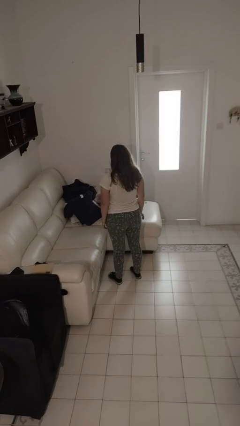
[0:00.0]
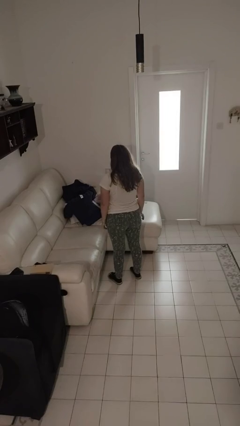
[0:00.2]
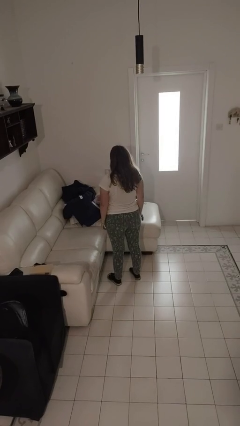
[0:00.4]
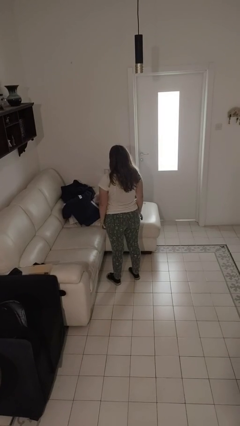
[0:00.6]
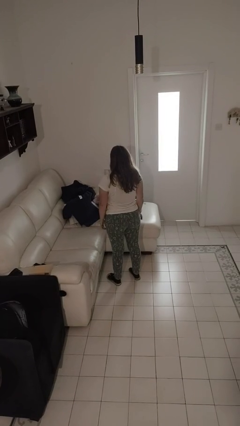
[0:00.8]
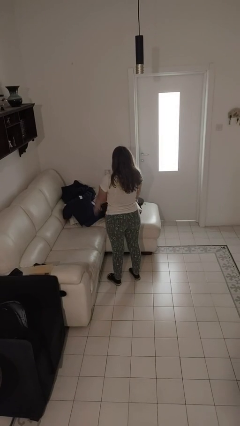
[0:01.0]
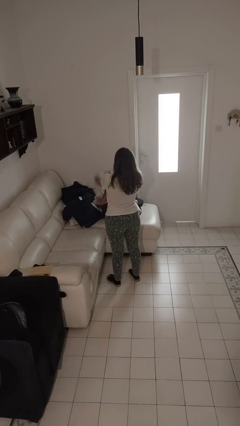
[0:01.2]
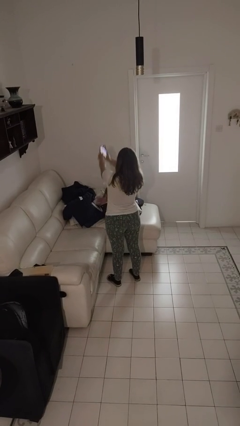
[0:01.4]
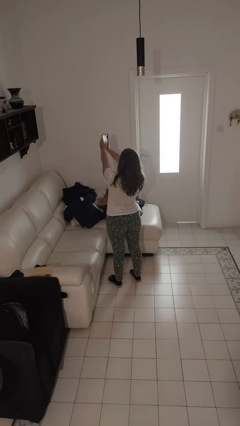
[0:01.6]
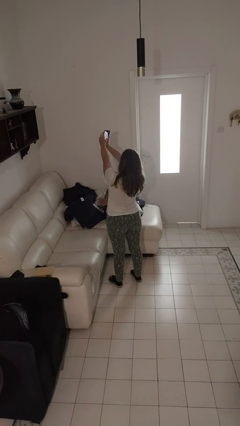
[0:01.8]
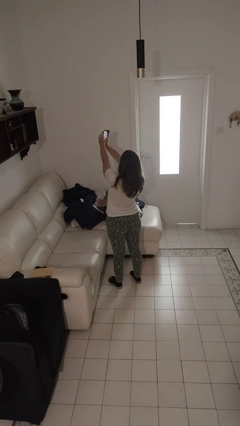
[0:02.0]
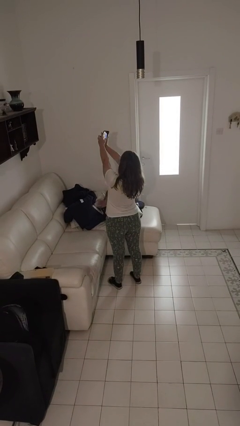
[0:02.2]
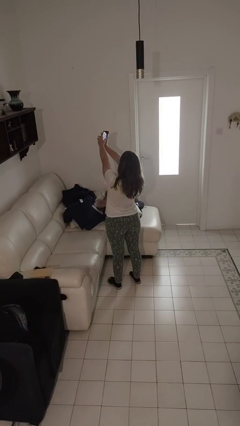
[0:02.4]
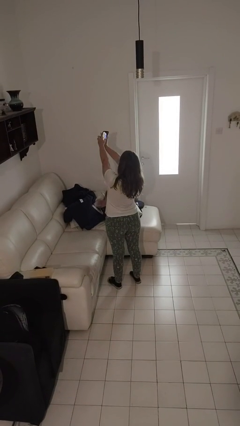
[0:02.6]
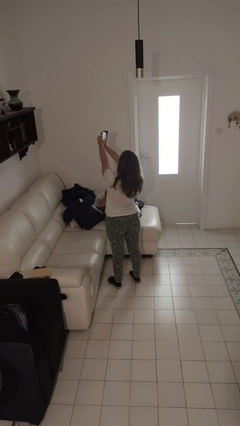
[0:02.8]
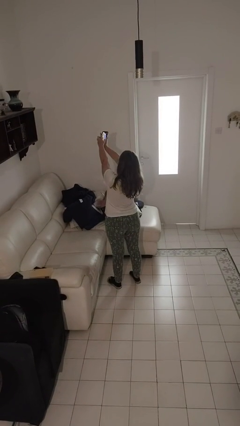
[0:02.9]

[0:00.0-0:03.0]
person takes selfie

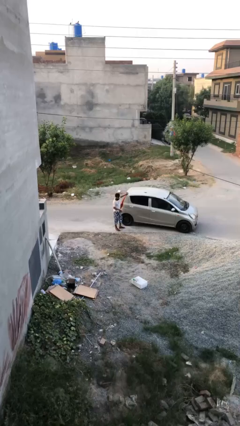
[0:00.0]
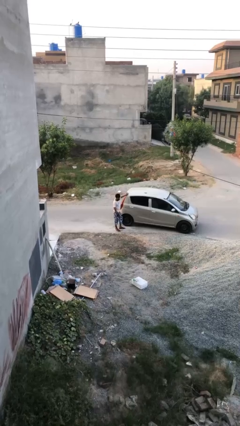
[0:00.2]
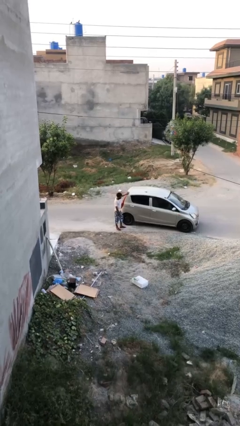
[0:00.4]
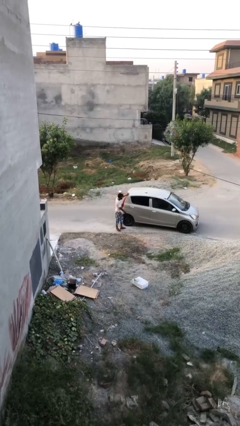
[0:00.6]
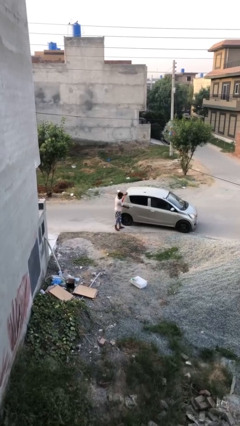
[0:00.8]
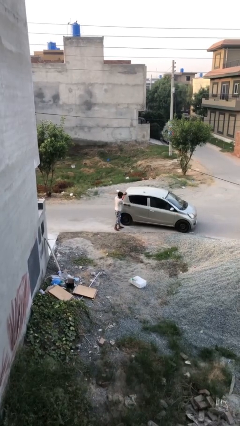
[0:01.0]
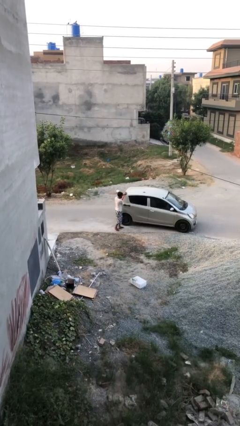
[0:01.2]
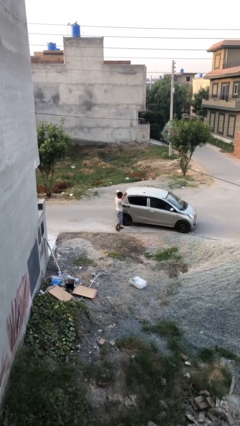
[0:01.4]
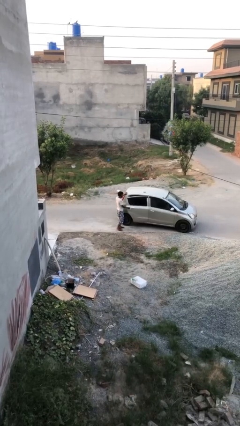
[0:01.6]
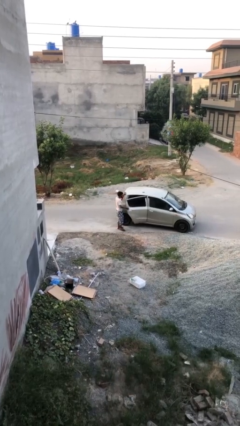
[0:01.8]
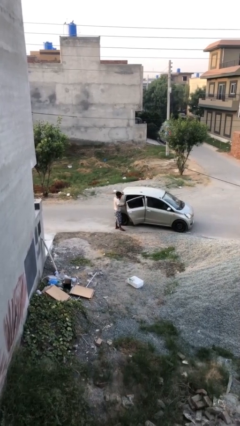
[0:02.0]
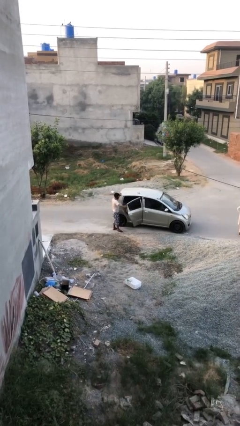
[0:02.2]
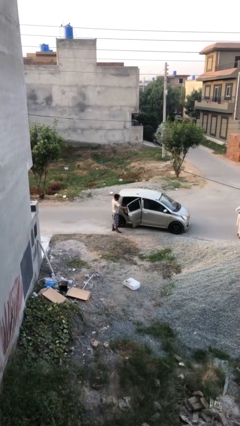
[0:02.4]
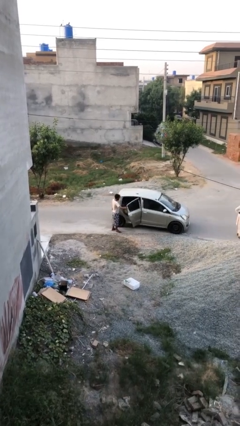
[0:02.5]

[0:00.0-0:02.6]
person opens car door

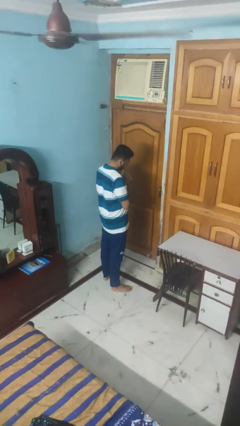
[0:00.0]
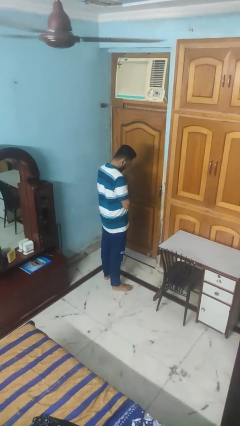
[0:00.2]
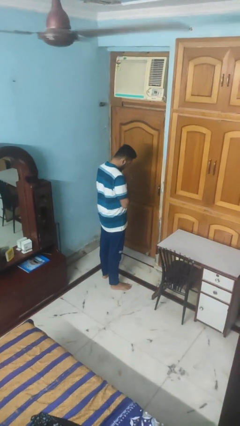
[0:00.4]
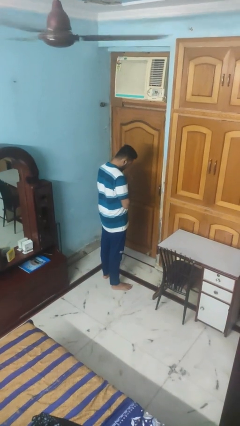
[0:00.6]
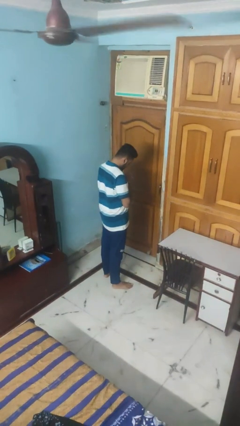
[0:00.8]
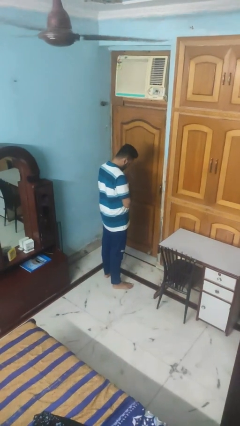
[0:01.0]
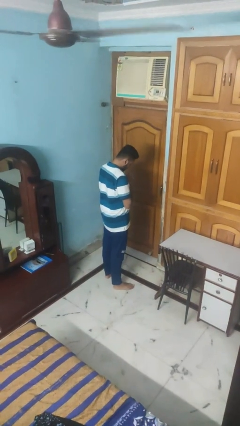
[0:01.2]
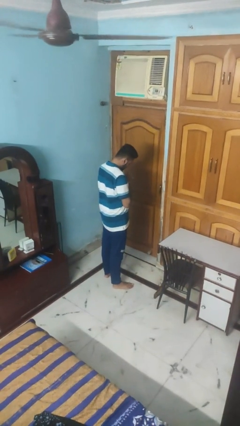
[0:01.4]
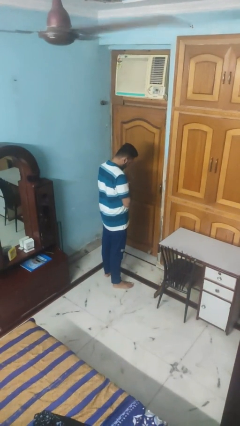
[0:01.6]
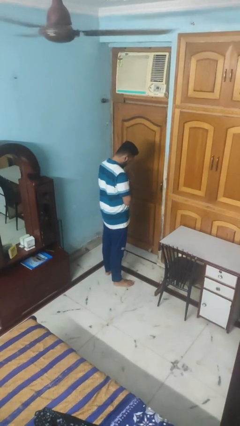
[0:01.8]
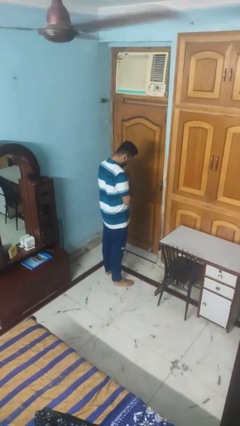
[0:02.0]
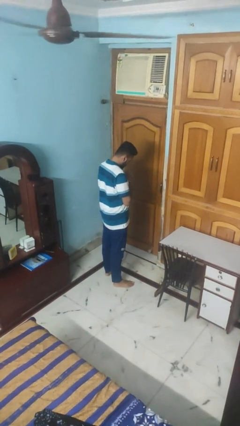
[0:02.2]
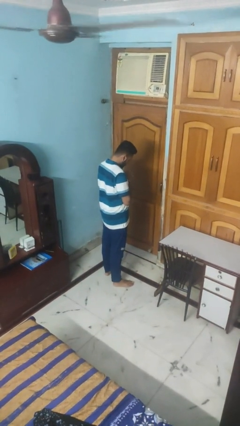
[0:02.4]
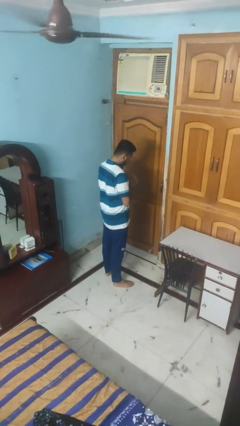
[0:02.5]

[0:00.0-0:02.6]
person prays

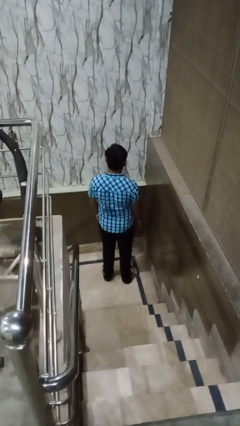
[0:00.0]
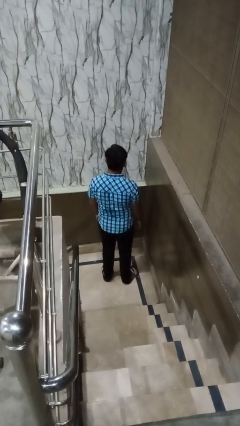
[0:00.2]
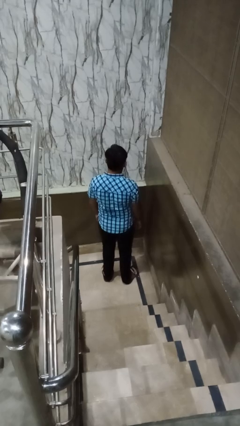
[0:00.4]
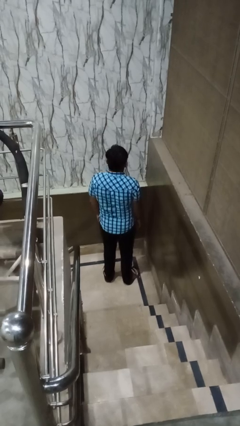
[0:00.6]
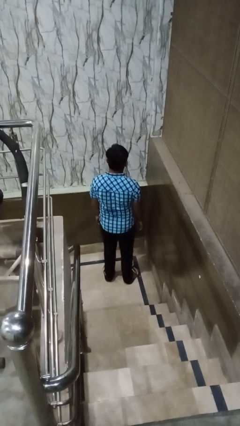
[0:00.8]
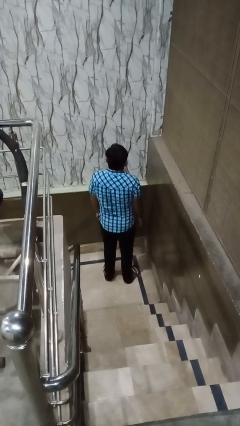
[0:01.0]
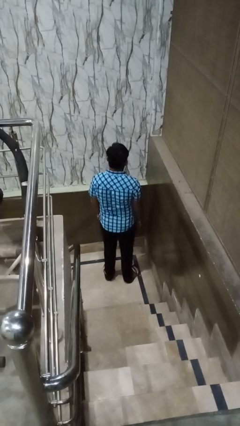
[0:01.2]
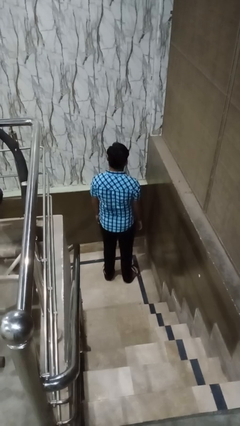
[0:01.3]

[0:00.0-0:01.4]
person shrugs

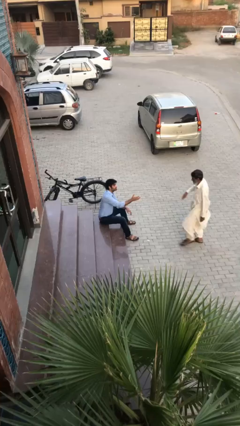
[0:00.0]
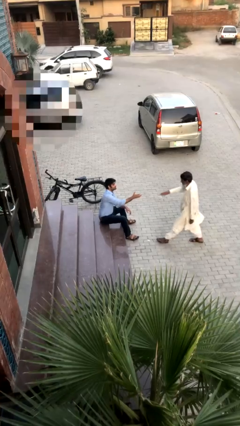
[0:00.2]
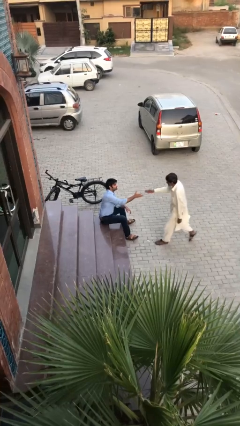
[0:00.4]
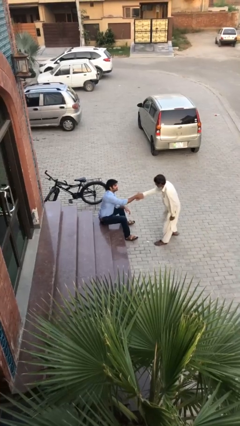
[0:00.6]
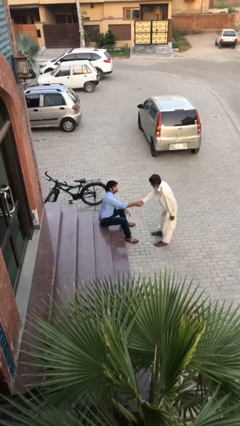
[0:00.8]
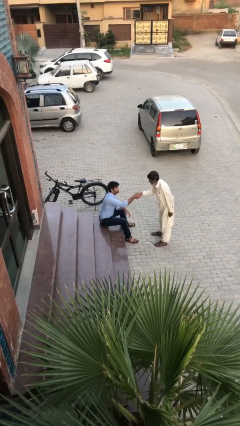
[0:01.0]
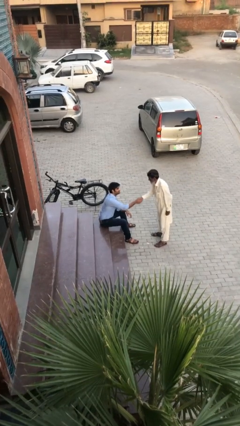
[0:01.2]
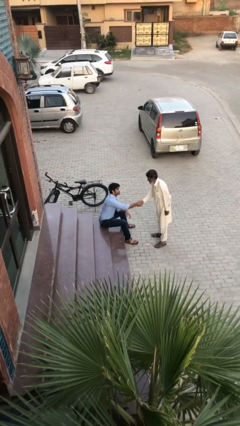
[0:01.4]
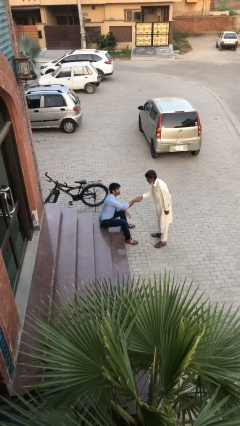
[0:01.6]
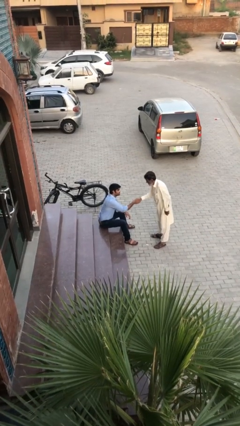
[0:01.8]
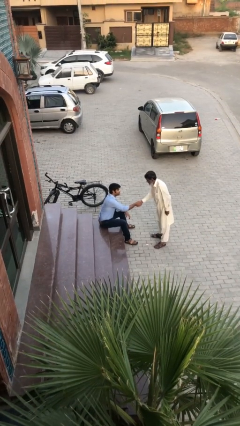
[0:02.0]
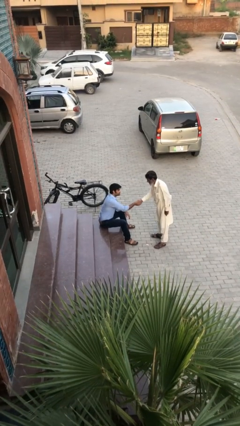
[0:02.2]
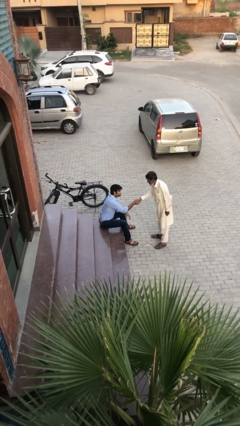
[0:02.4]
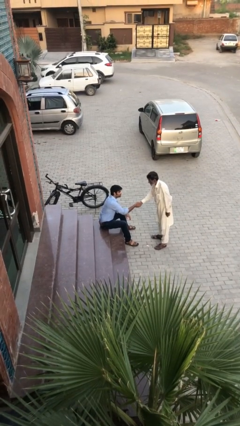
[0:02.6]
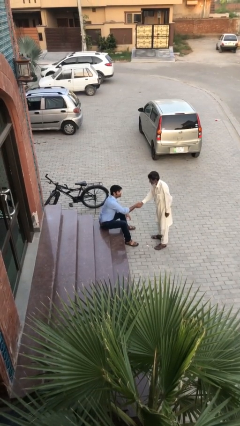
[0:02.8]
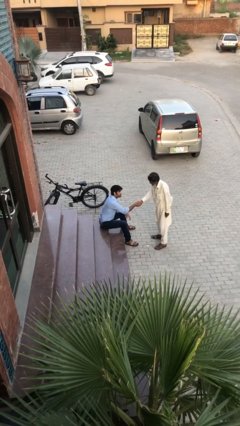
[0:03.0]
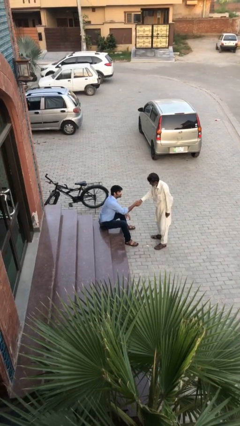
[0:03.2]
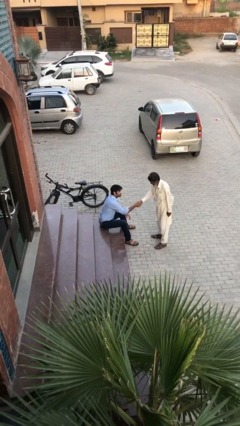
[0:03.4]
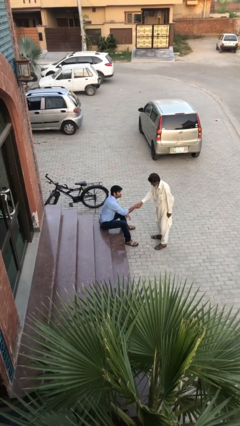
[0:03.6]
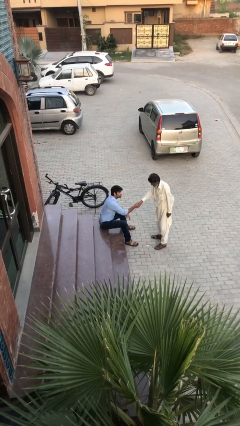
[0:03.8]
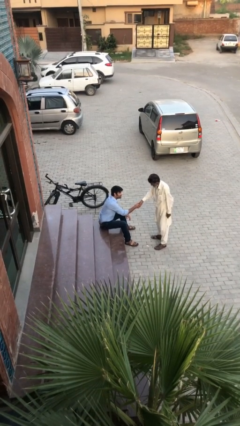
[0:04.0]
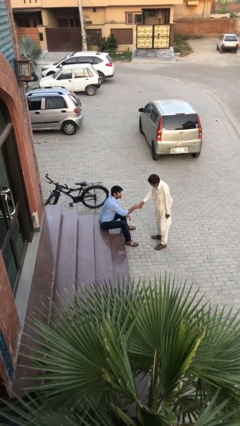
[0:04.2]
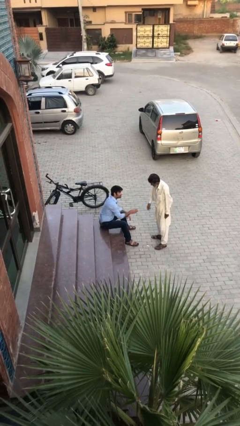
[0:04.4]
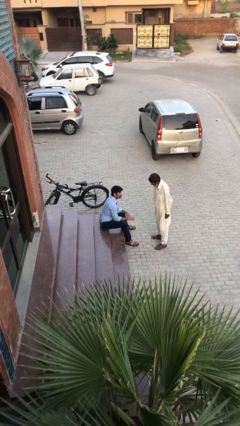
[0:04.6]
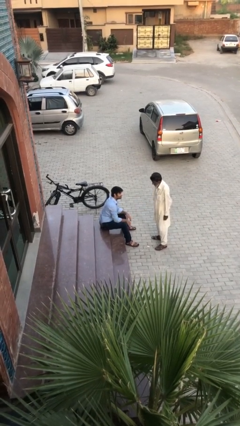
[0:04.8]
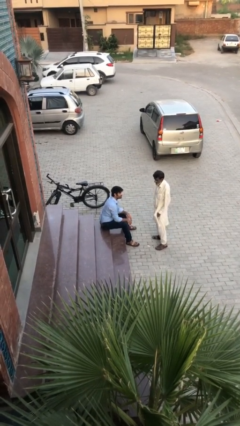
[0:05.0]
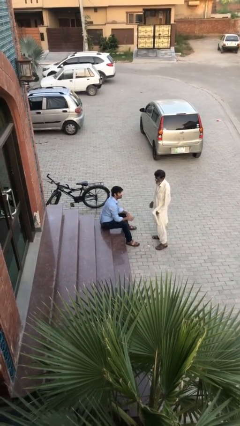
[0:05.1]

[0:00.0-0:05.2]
person shakes hand

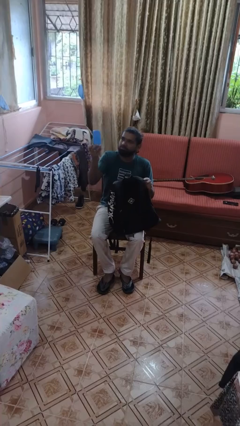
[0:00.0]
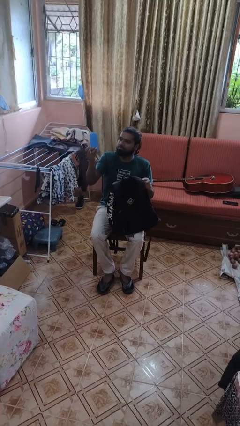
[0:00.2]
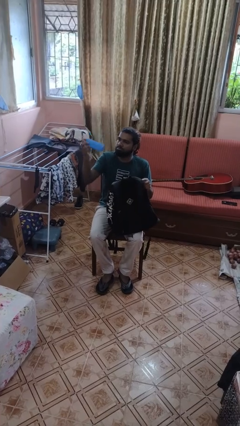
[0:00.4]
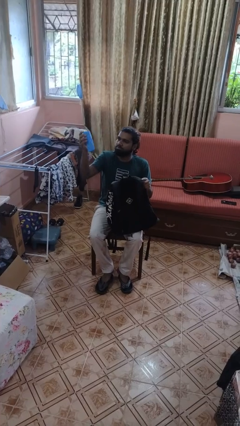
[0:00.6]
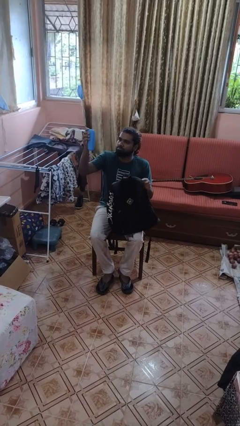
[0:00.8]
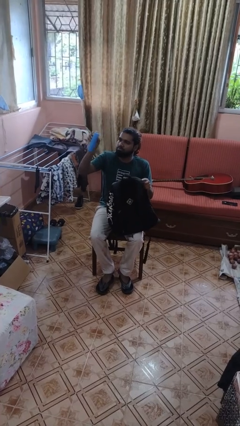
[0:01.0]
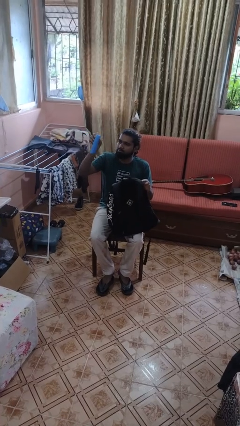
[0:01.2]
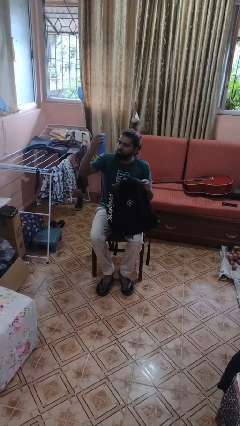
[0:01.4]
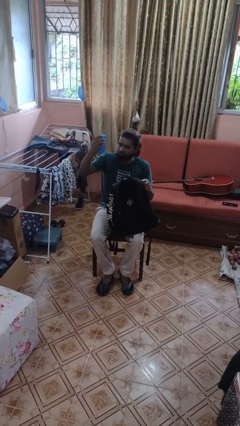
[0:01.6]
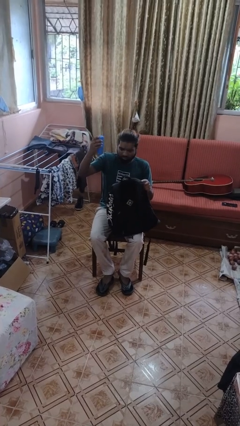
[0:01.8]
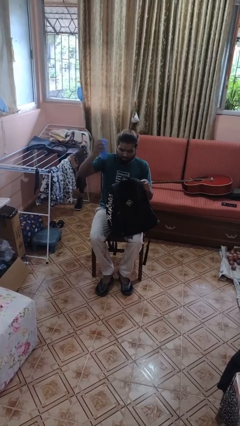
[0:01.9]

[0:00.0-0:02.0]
person takes object from backpack

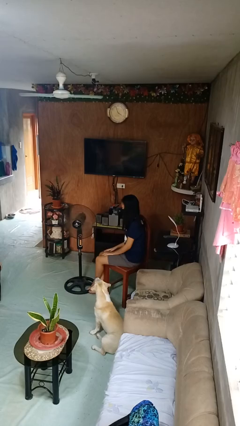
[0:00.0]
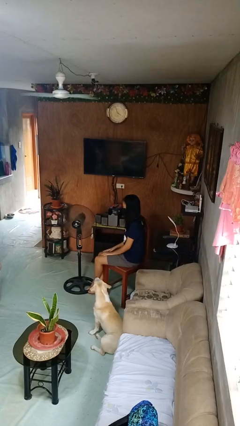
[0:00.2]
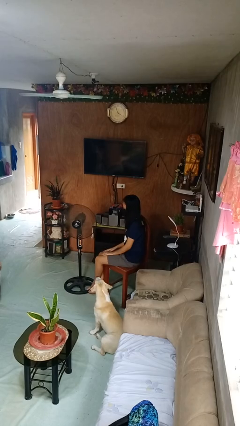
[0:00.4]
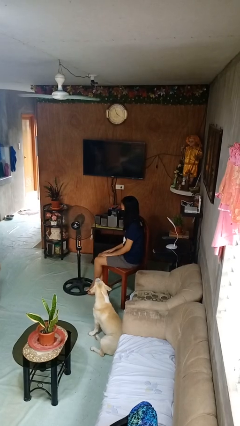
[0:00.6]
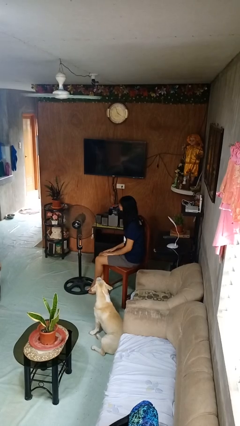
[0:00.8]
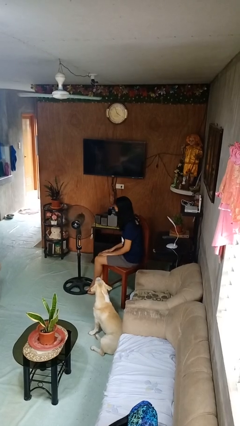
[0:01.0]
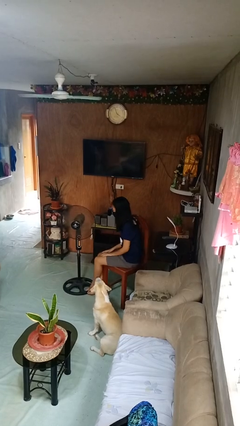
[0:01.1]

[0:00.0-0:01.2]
person turns on fan
